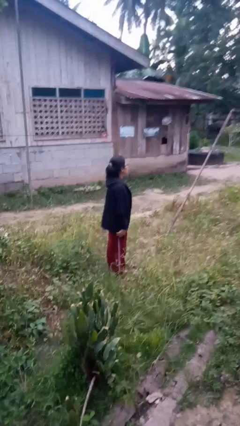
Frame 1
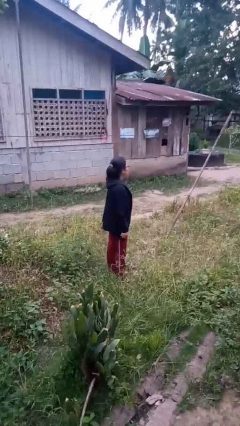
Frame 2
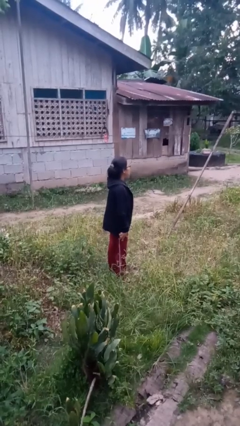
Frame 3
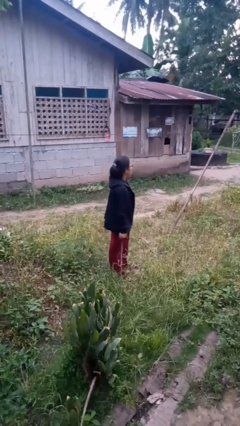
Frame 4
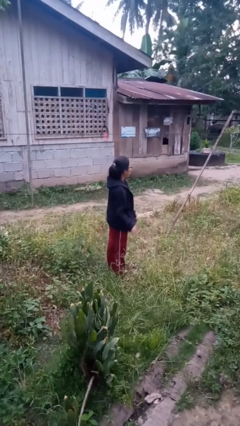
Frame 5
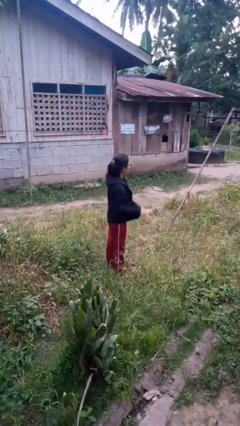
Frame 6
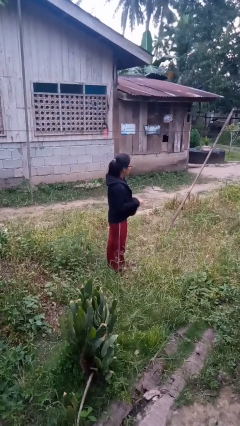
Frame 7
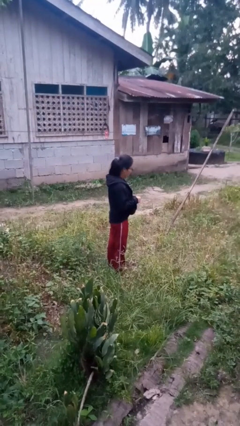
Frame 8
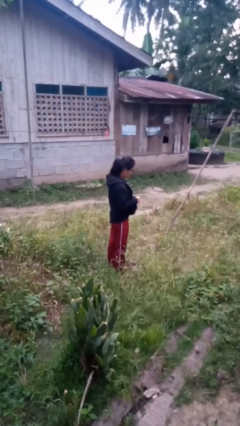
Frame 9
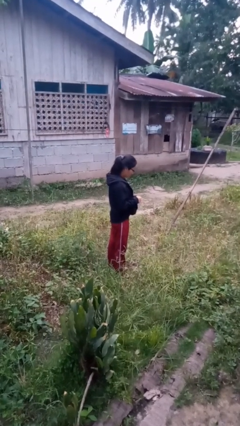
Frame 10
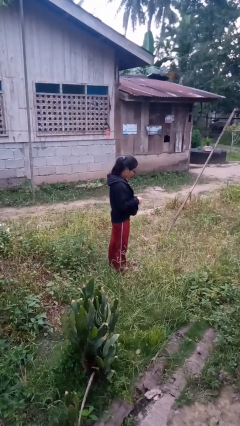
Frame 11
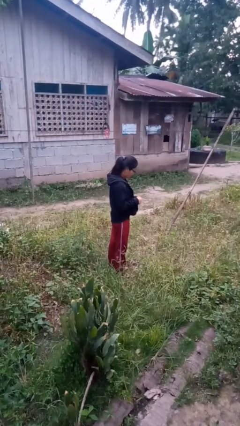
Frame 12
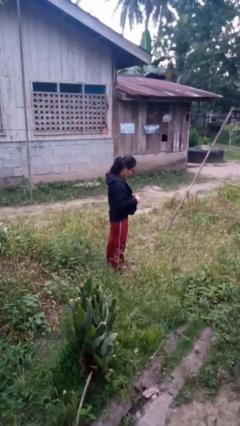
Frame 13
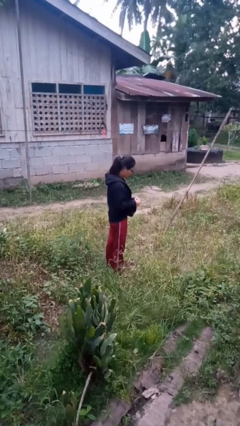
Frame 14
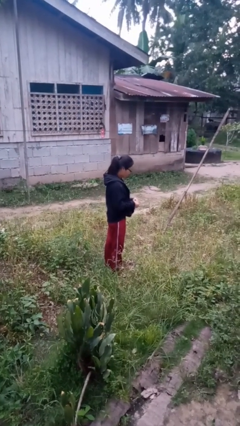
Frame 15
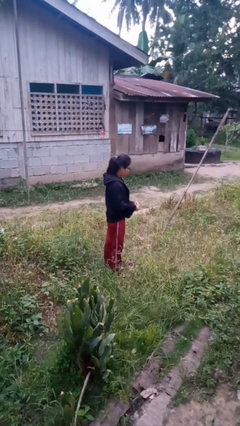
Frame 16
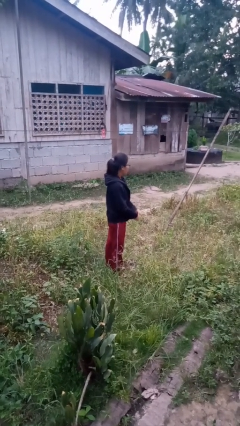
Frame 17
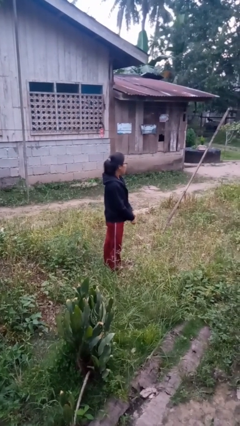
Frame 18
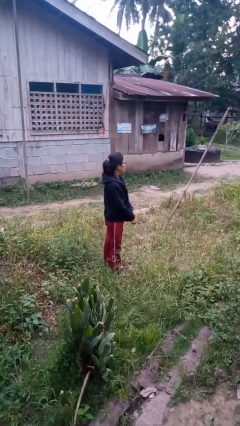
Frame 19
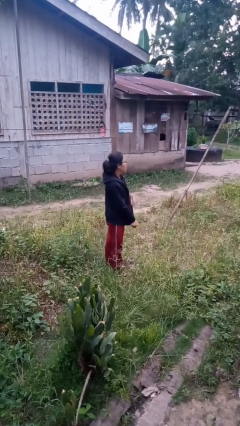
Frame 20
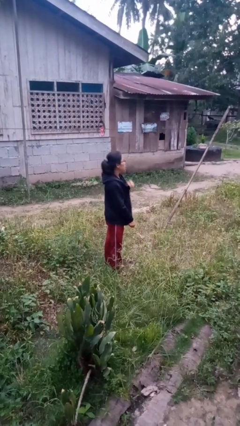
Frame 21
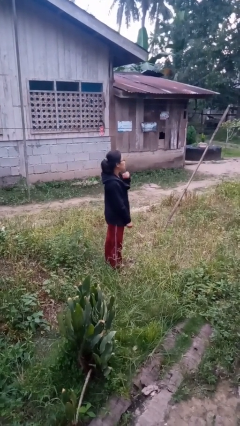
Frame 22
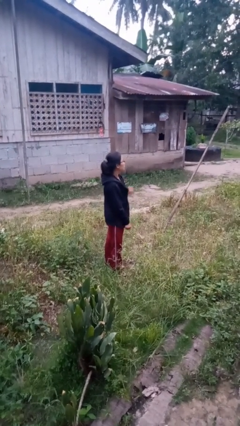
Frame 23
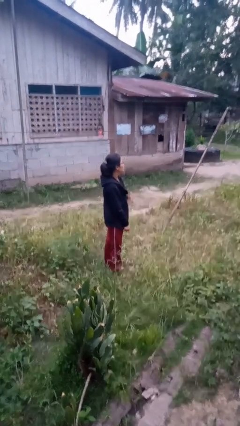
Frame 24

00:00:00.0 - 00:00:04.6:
person zips up jacket

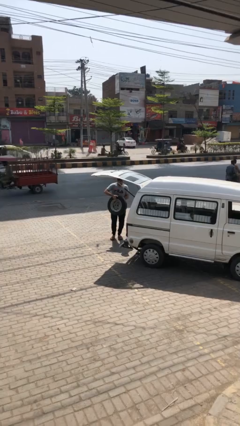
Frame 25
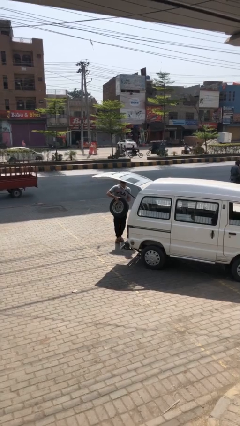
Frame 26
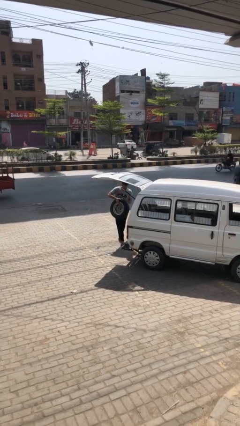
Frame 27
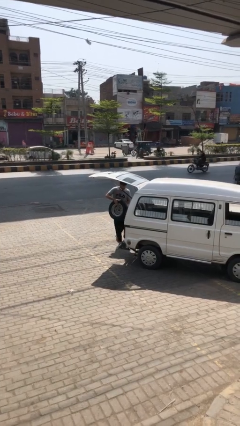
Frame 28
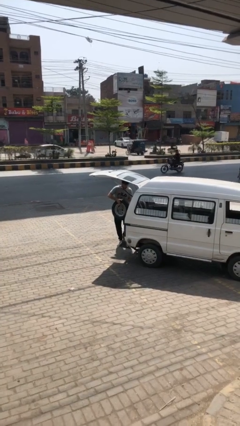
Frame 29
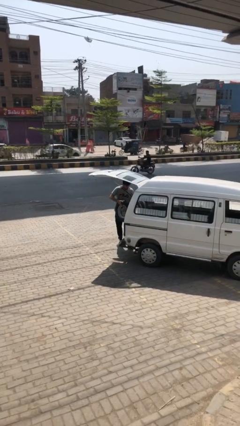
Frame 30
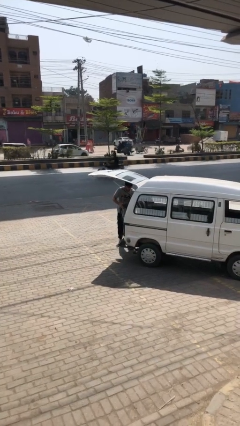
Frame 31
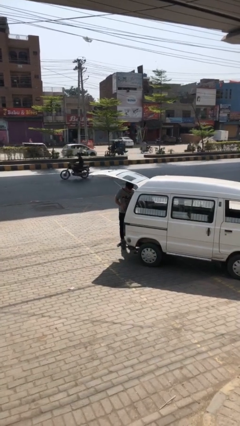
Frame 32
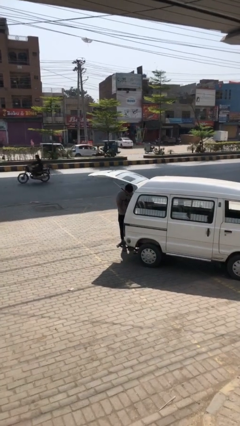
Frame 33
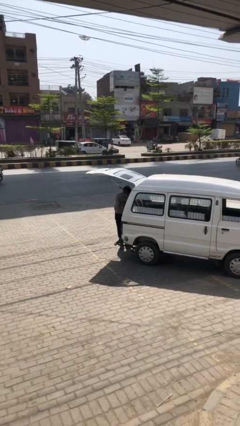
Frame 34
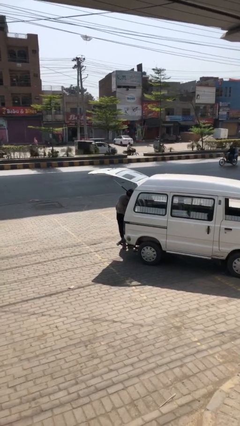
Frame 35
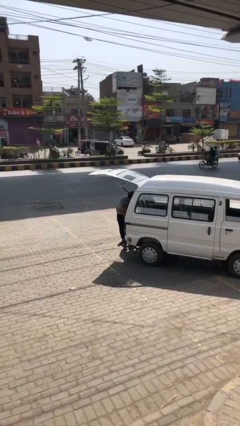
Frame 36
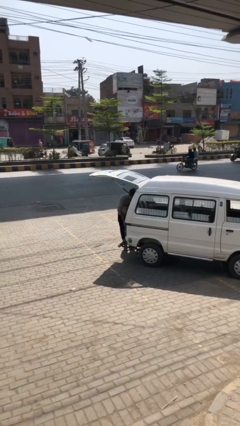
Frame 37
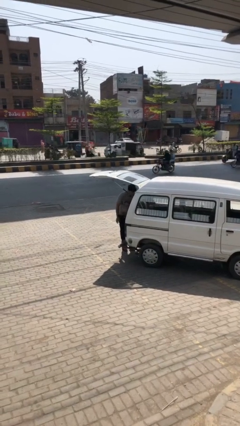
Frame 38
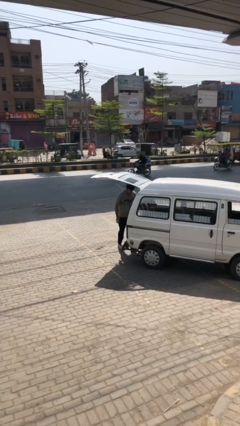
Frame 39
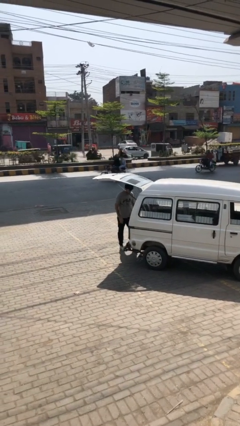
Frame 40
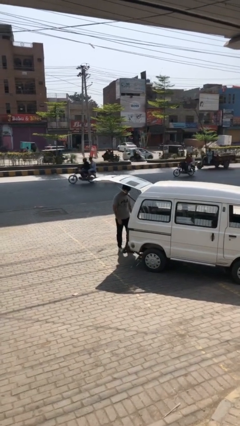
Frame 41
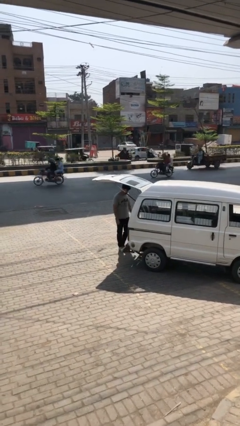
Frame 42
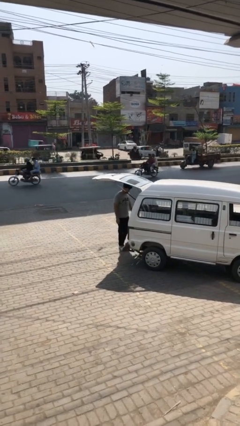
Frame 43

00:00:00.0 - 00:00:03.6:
person loads car

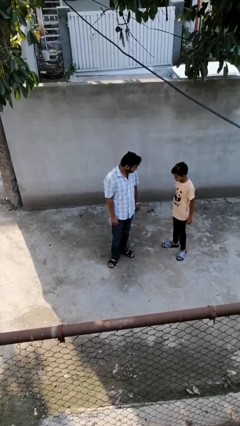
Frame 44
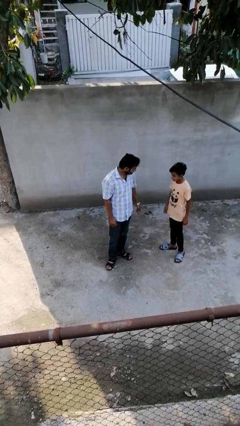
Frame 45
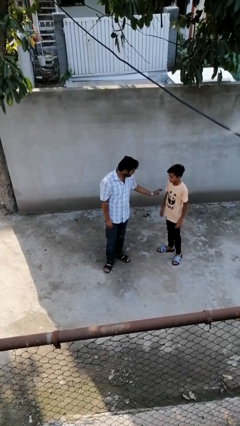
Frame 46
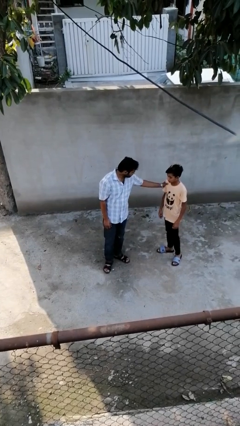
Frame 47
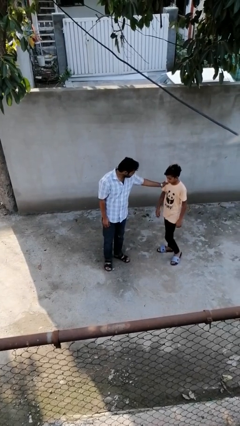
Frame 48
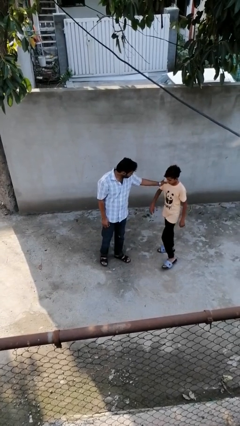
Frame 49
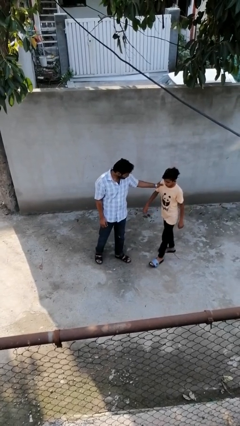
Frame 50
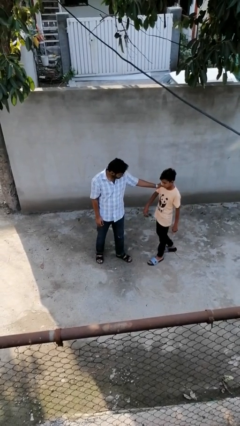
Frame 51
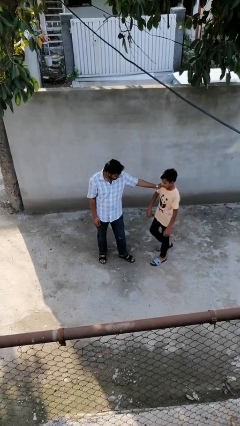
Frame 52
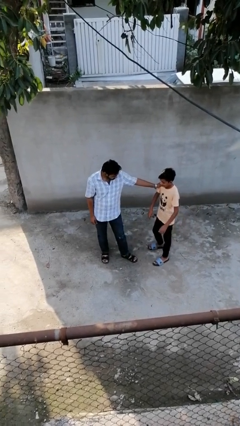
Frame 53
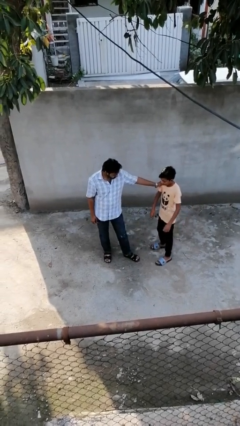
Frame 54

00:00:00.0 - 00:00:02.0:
person grabs person by bicep

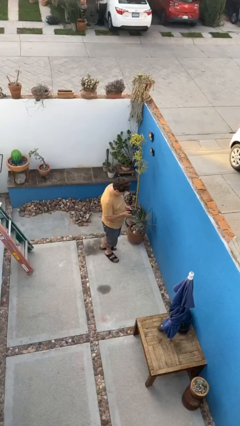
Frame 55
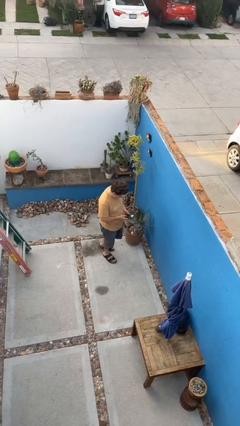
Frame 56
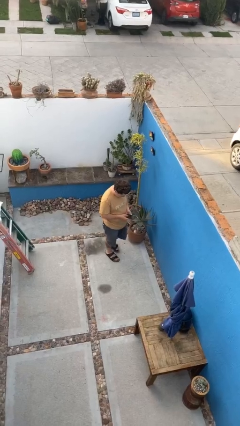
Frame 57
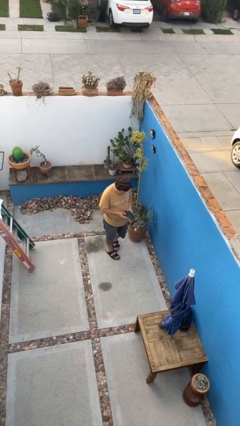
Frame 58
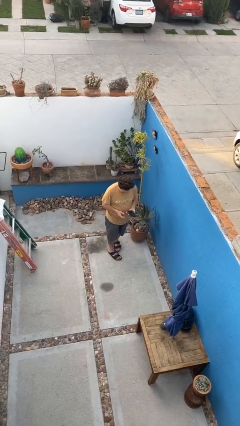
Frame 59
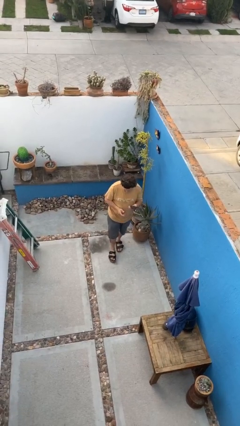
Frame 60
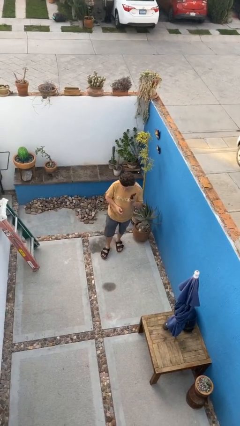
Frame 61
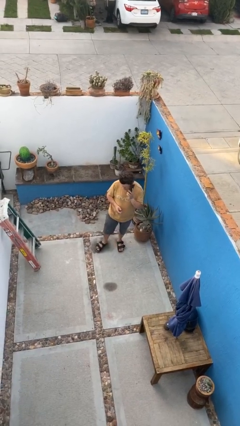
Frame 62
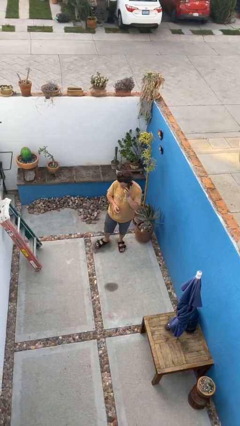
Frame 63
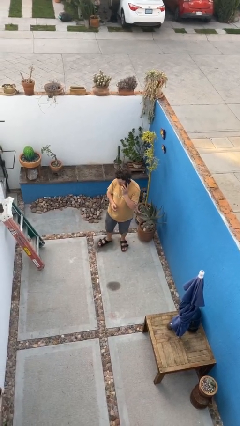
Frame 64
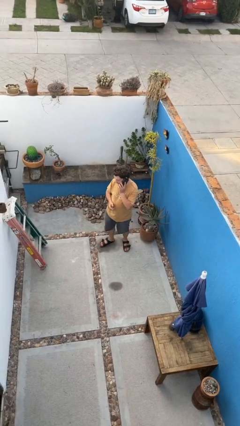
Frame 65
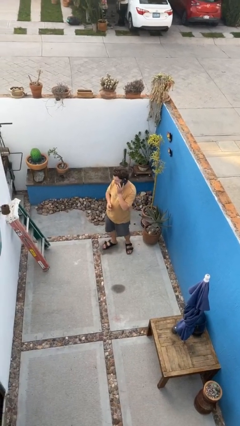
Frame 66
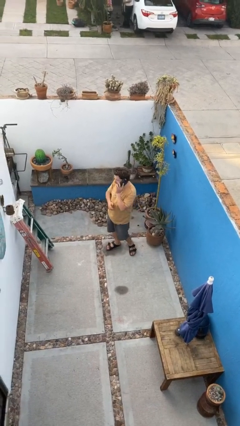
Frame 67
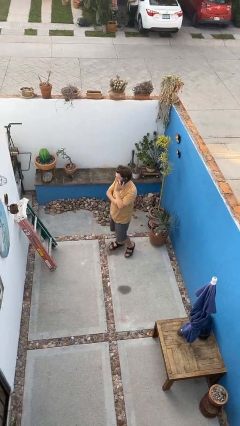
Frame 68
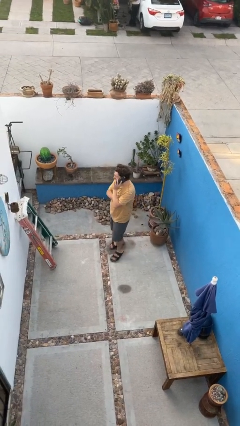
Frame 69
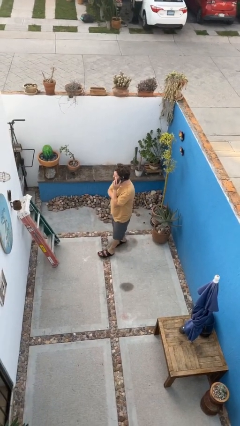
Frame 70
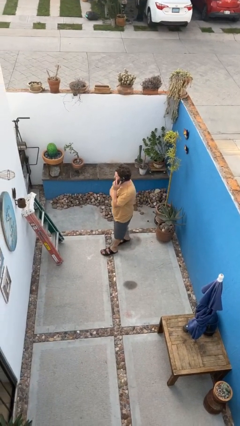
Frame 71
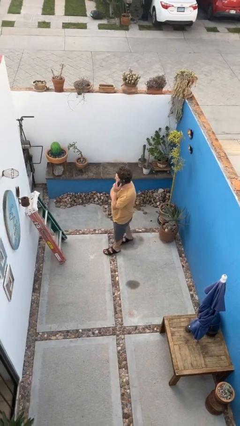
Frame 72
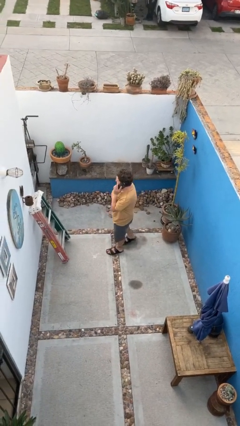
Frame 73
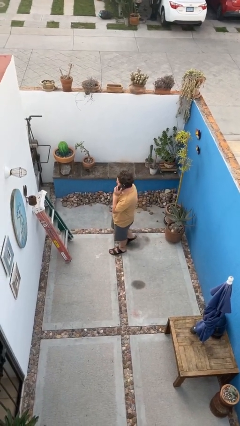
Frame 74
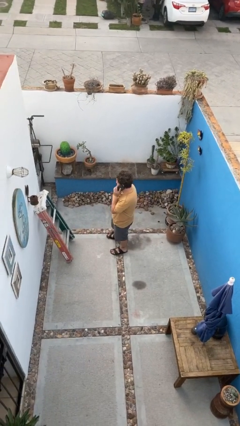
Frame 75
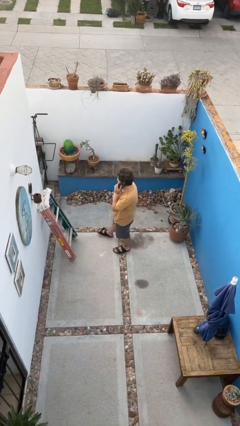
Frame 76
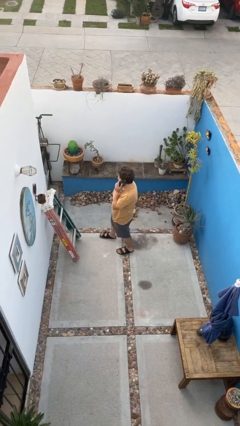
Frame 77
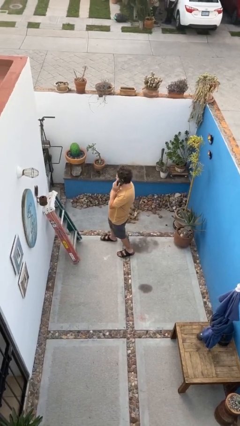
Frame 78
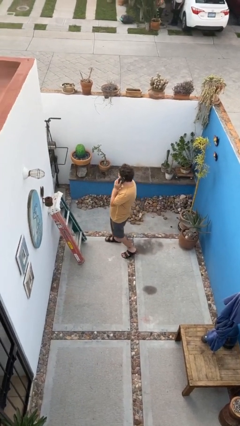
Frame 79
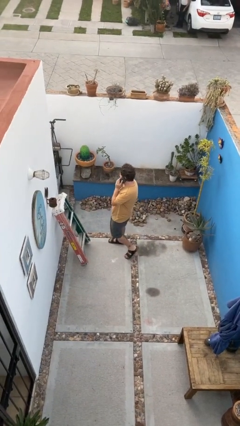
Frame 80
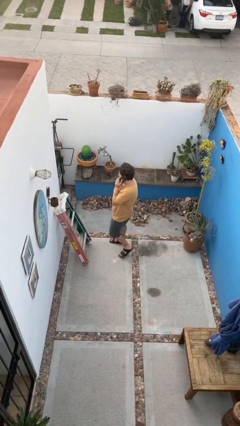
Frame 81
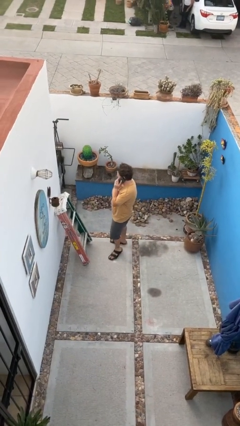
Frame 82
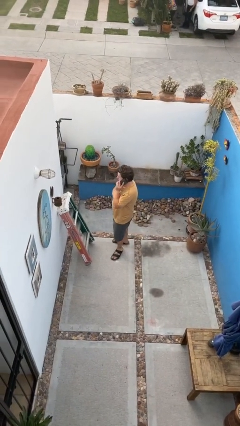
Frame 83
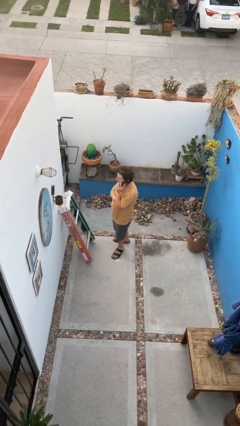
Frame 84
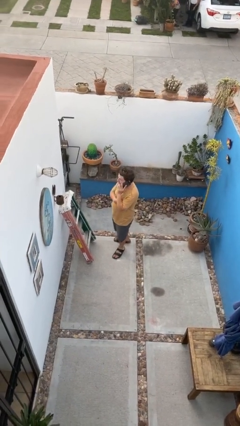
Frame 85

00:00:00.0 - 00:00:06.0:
person talks on phone

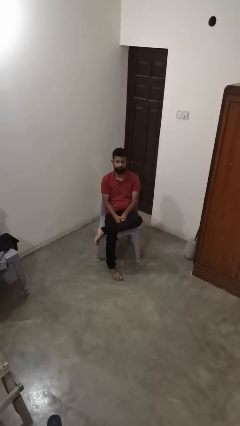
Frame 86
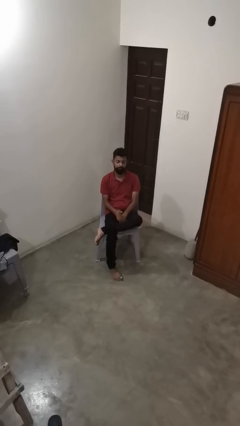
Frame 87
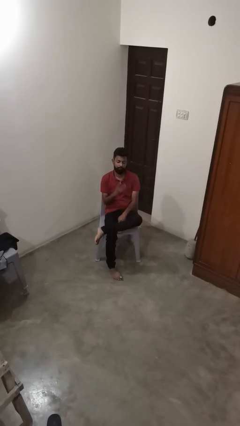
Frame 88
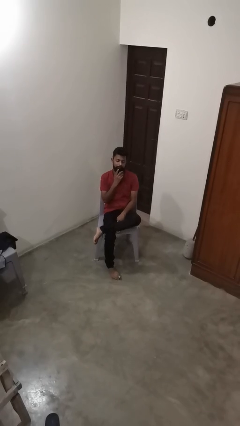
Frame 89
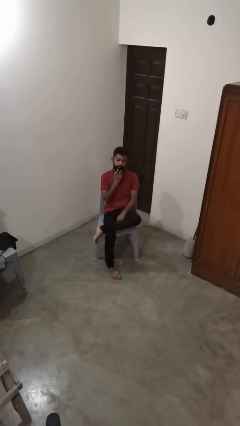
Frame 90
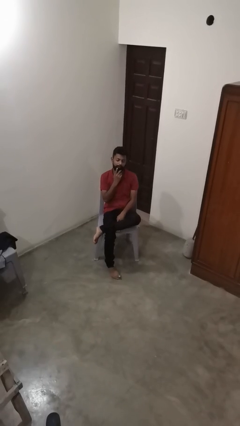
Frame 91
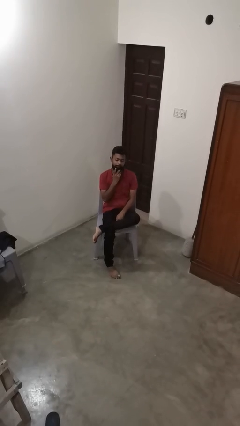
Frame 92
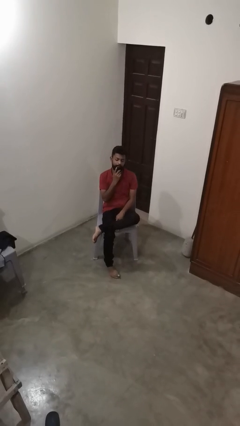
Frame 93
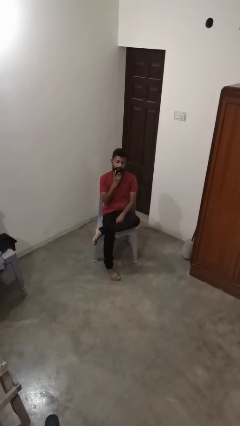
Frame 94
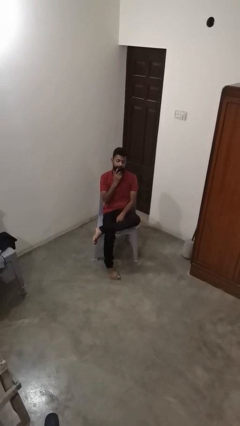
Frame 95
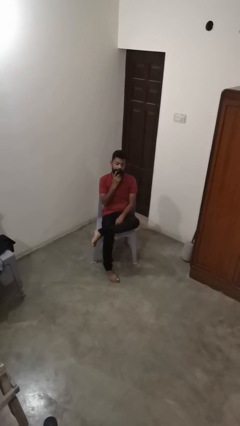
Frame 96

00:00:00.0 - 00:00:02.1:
person strokes chin
